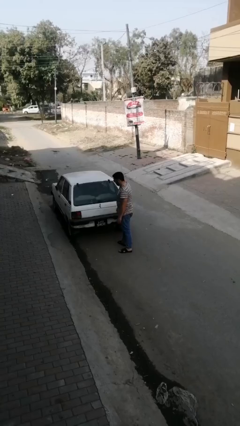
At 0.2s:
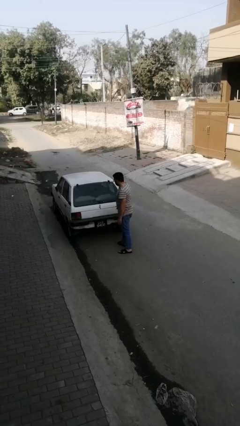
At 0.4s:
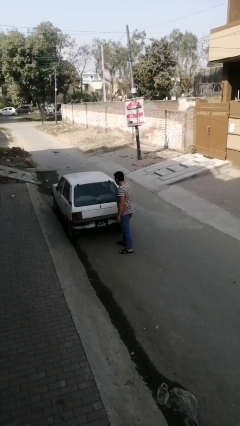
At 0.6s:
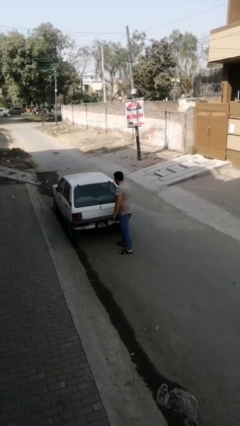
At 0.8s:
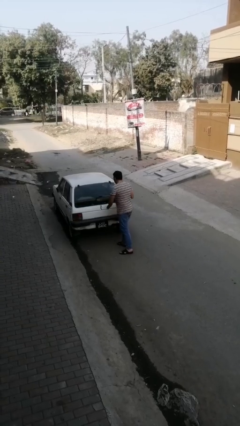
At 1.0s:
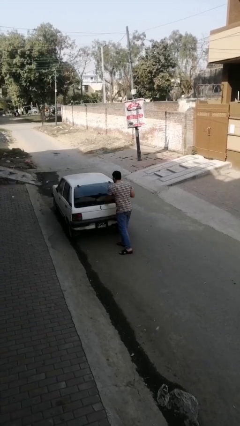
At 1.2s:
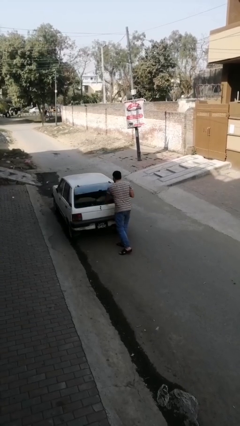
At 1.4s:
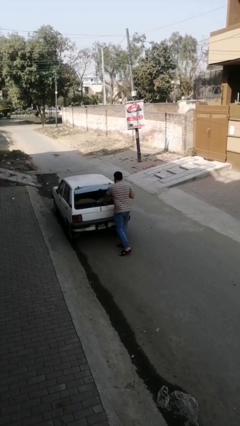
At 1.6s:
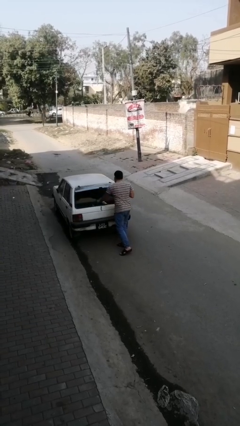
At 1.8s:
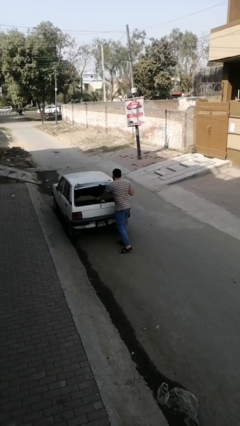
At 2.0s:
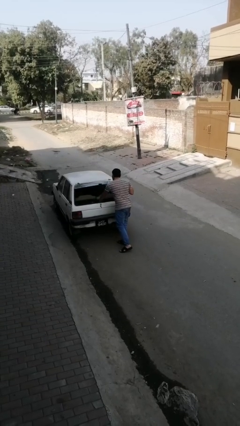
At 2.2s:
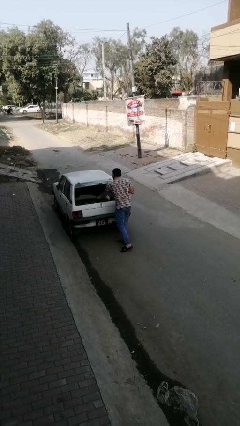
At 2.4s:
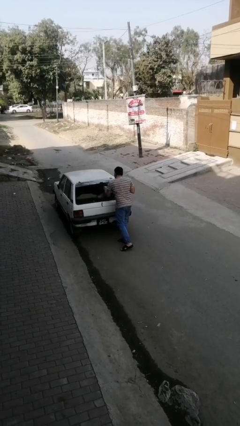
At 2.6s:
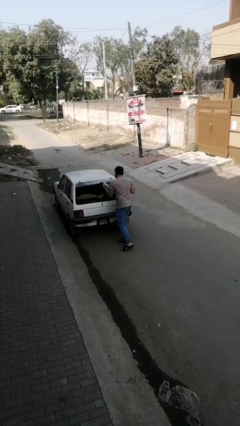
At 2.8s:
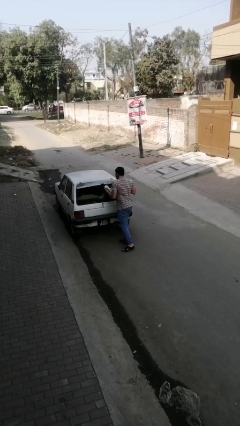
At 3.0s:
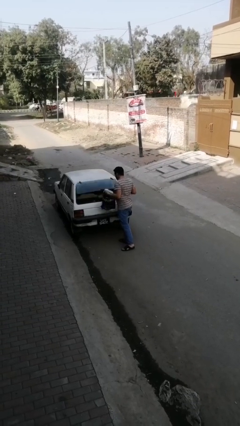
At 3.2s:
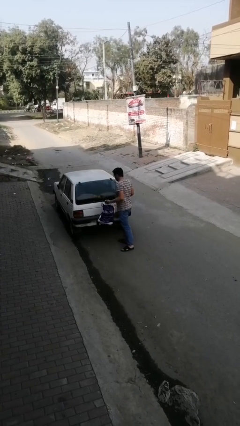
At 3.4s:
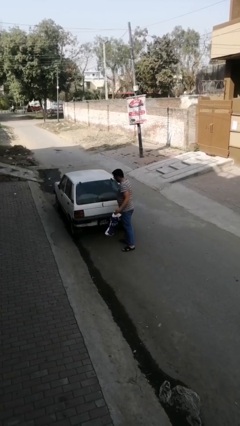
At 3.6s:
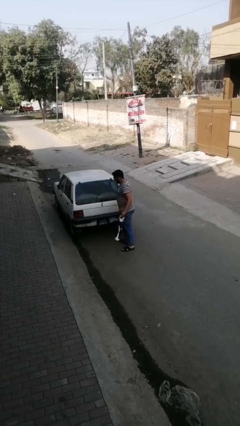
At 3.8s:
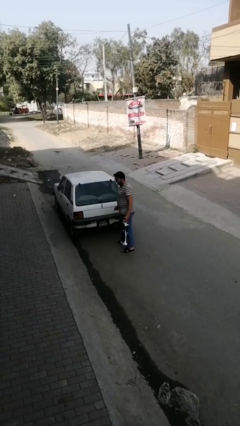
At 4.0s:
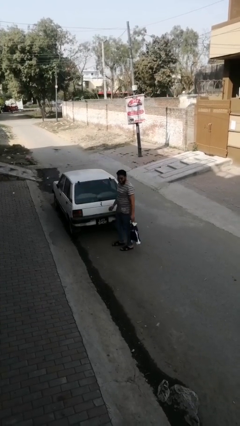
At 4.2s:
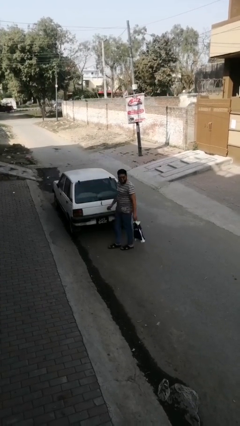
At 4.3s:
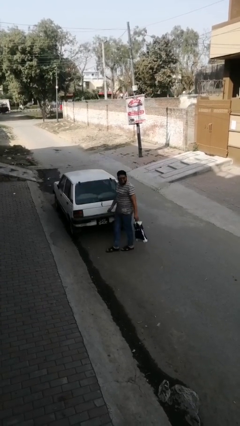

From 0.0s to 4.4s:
person unloads car

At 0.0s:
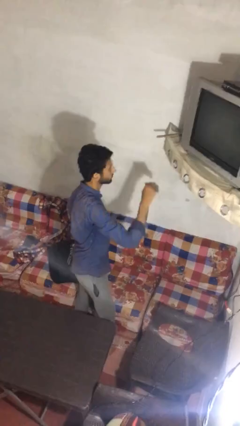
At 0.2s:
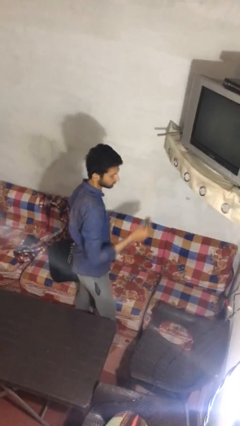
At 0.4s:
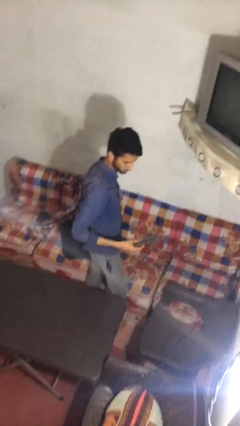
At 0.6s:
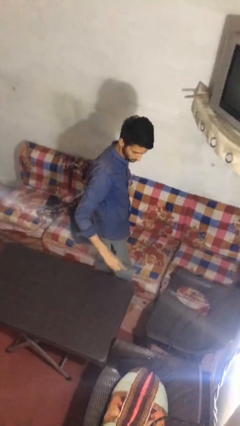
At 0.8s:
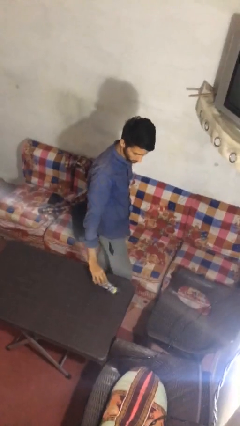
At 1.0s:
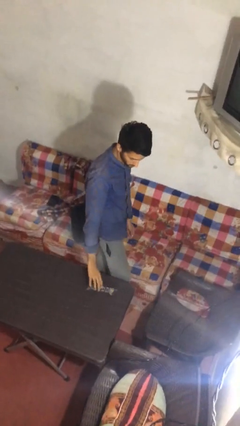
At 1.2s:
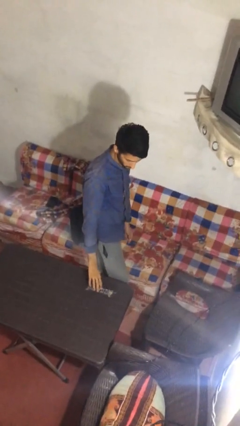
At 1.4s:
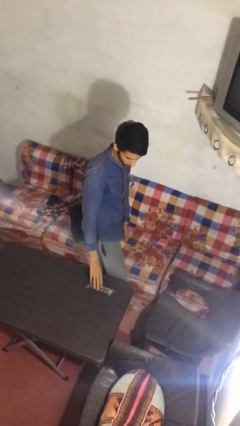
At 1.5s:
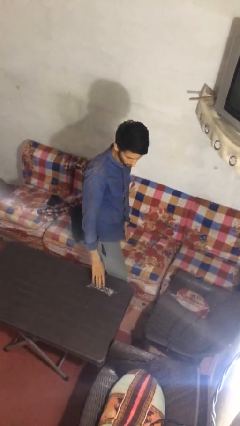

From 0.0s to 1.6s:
person puts down object on table

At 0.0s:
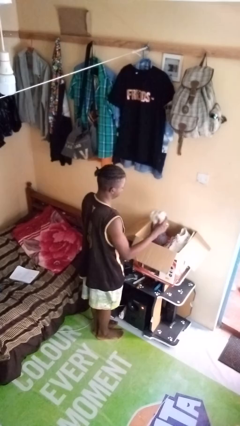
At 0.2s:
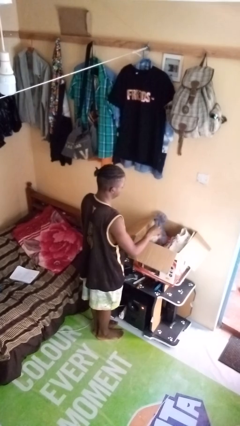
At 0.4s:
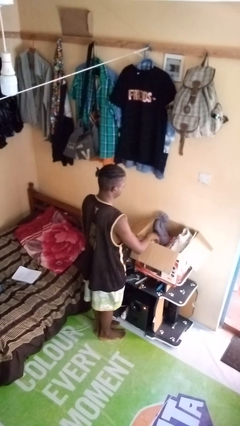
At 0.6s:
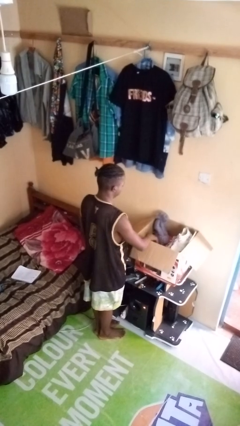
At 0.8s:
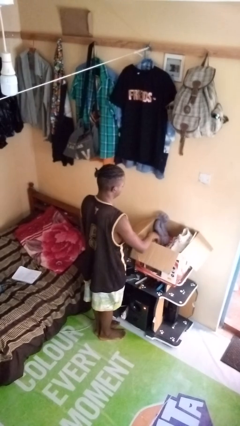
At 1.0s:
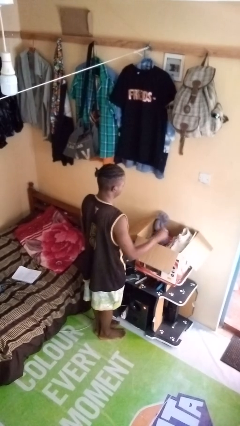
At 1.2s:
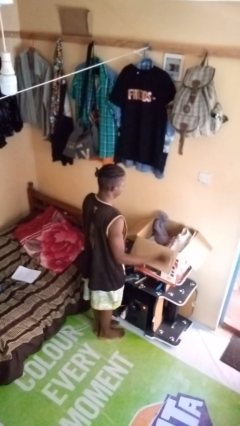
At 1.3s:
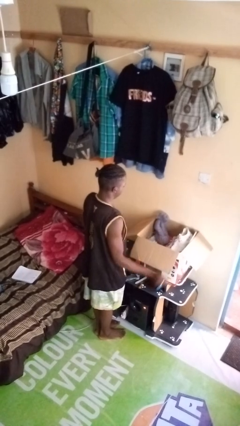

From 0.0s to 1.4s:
person puts object into box

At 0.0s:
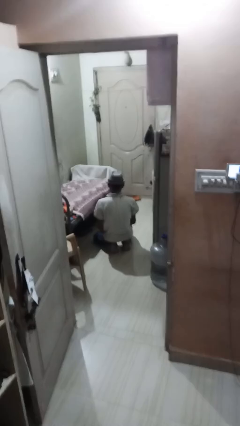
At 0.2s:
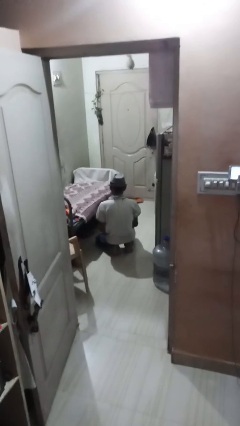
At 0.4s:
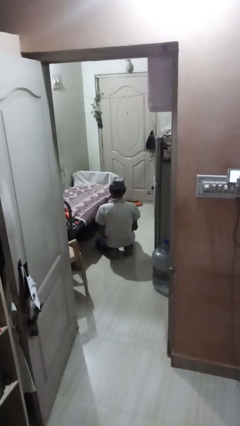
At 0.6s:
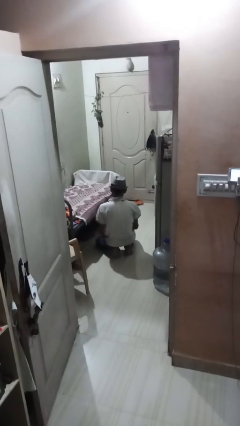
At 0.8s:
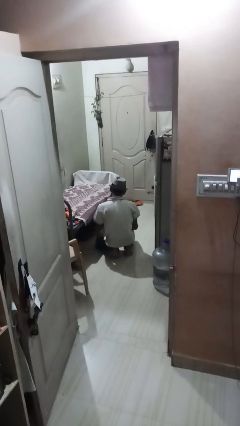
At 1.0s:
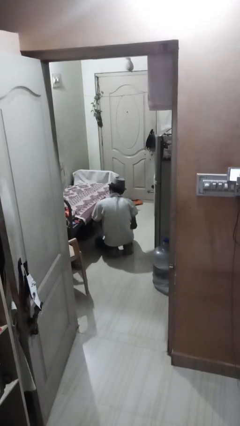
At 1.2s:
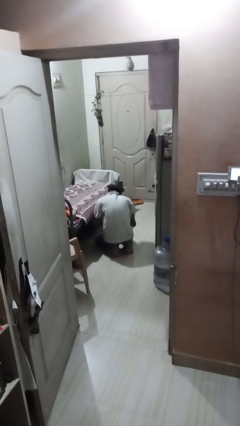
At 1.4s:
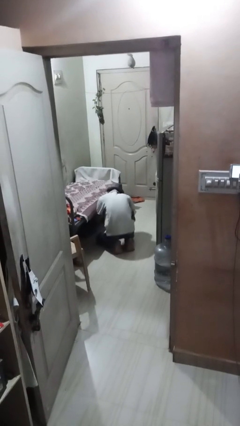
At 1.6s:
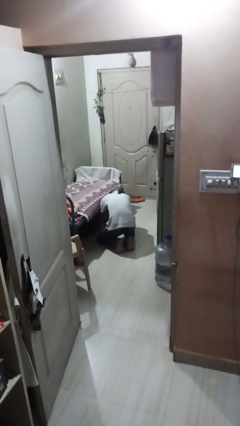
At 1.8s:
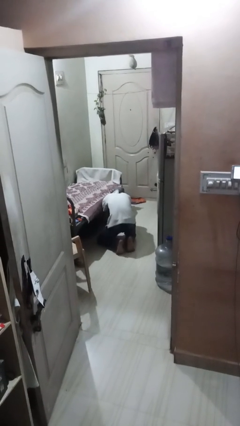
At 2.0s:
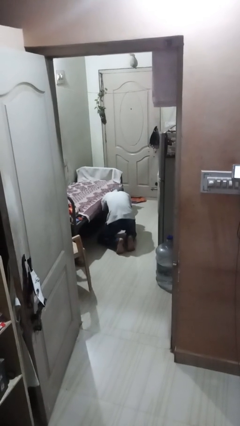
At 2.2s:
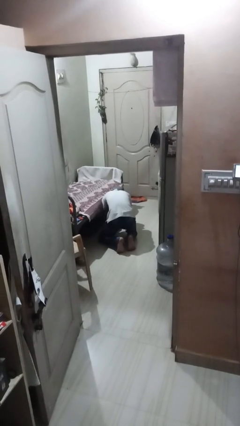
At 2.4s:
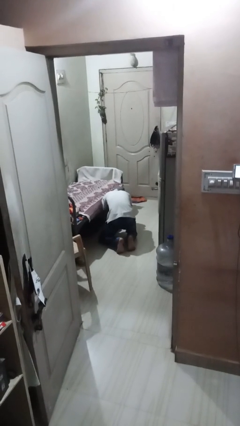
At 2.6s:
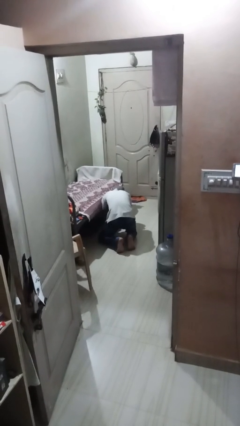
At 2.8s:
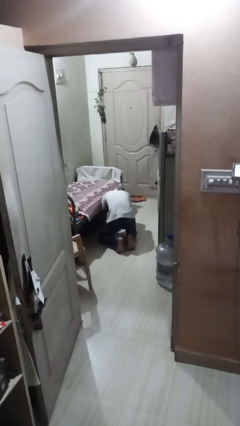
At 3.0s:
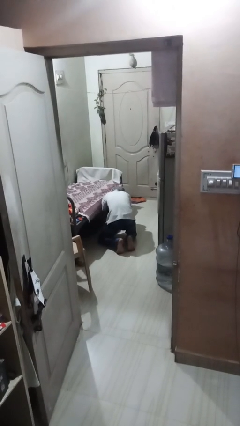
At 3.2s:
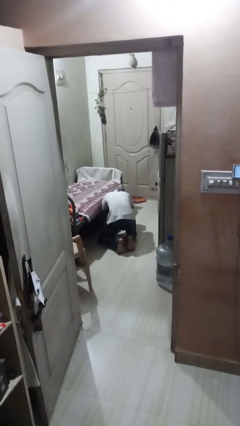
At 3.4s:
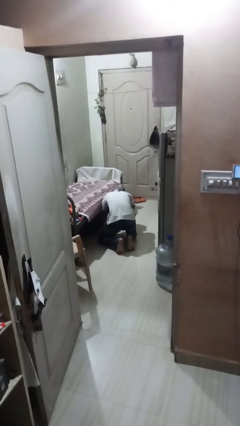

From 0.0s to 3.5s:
person searches under bed

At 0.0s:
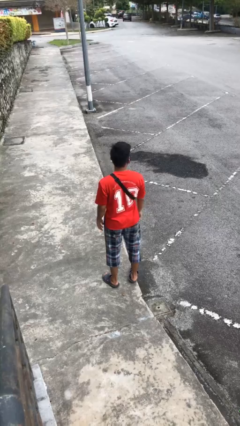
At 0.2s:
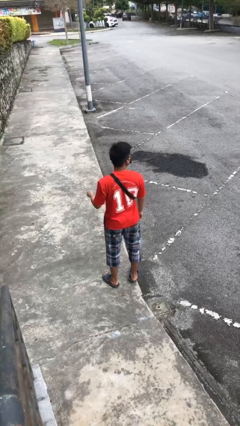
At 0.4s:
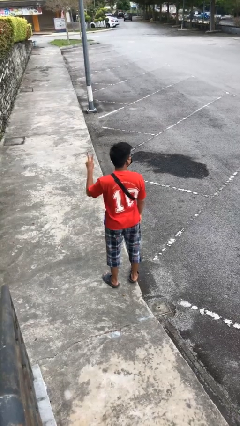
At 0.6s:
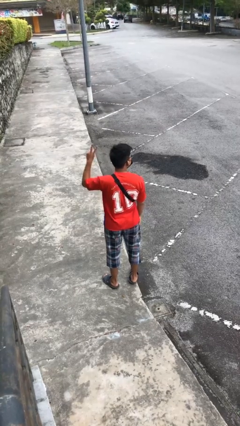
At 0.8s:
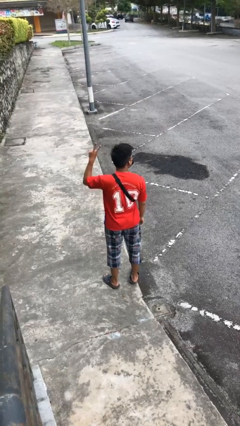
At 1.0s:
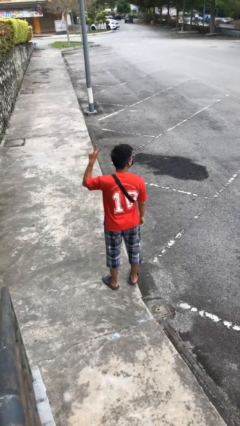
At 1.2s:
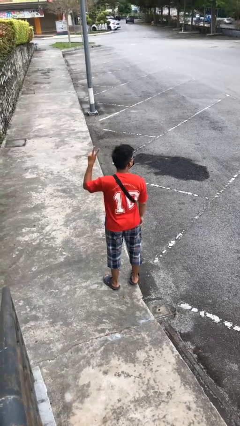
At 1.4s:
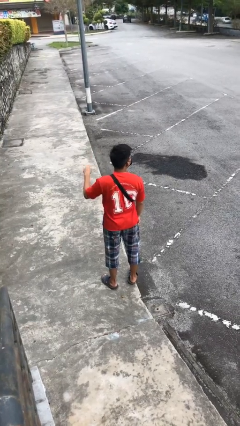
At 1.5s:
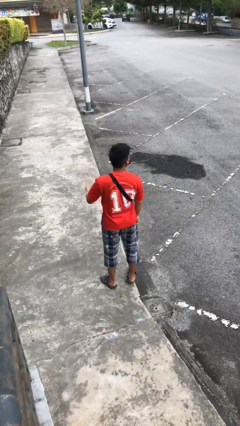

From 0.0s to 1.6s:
person gestures peace

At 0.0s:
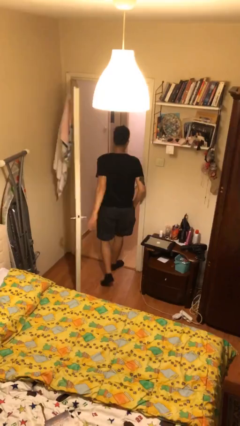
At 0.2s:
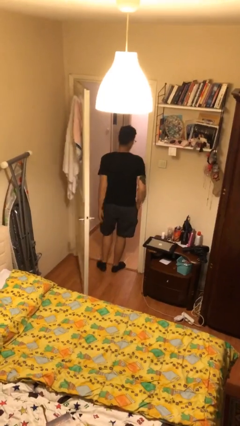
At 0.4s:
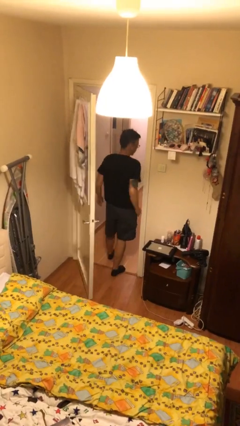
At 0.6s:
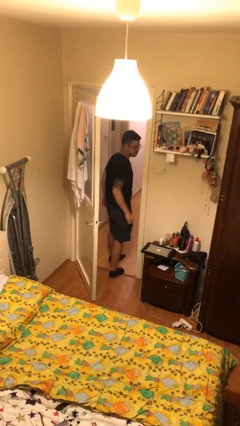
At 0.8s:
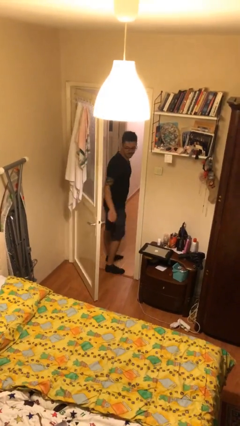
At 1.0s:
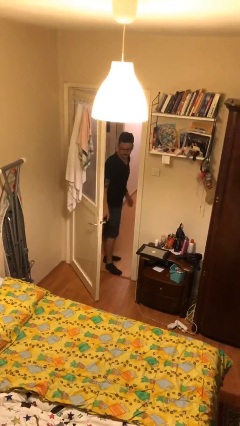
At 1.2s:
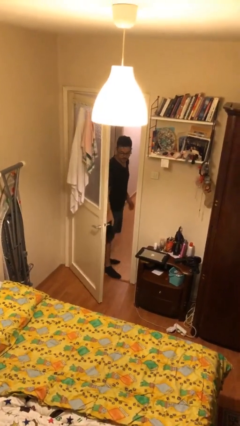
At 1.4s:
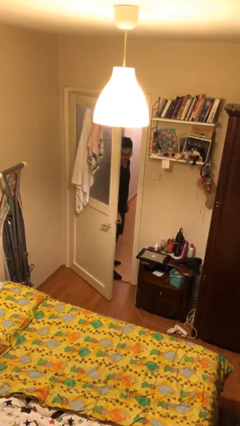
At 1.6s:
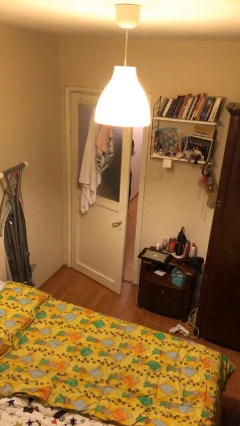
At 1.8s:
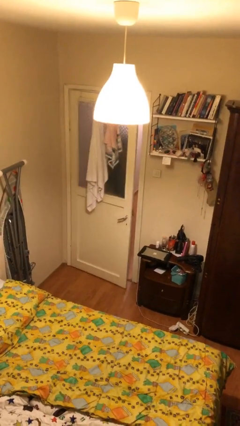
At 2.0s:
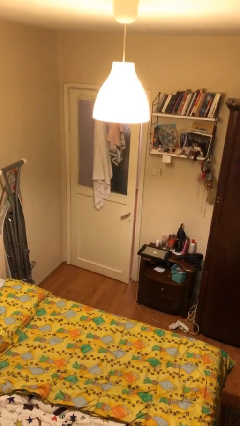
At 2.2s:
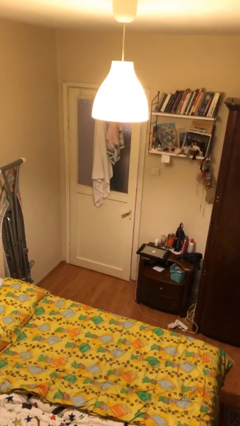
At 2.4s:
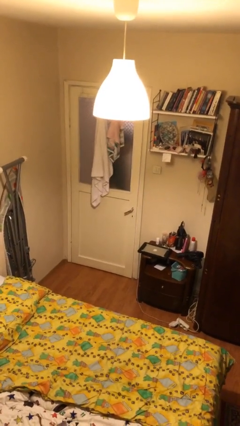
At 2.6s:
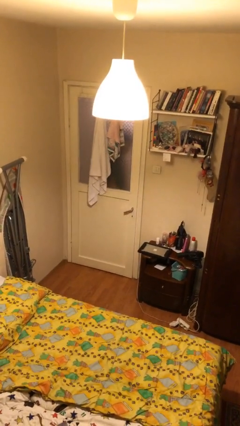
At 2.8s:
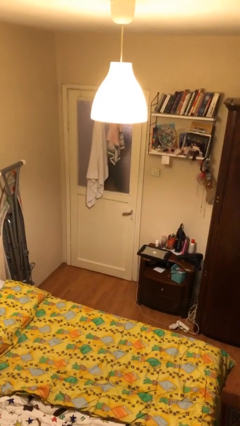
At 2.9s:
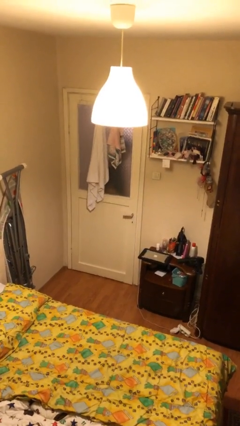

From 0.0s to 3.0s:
person closes facility door

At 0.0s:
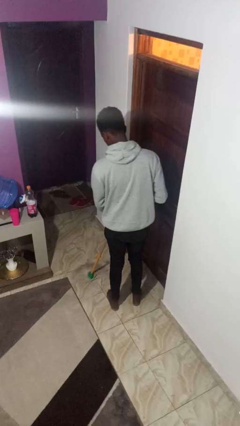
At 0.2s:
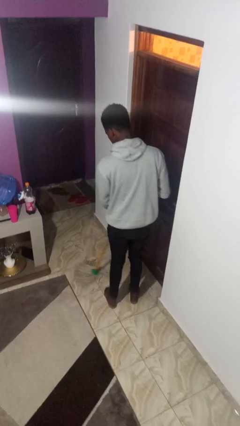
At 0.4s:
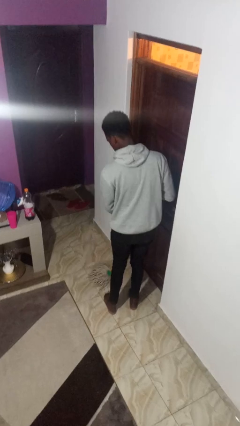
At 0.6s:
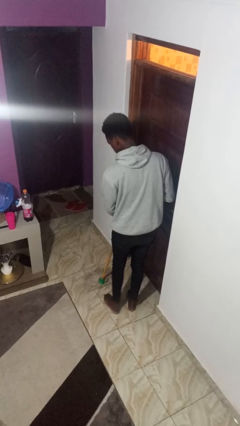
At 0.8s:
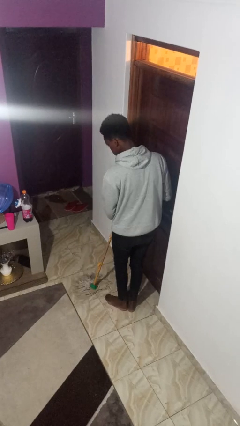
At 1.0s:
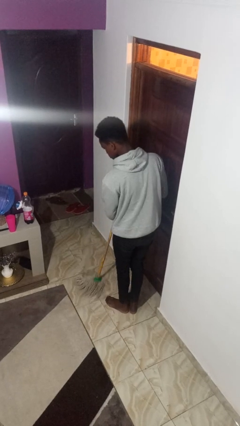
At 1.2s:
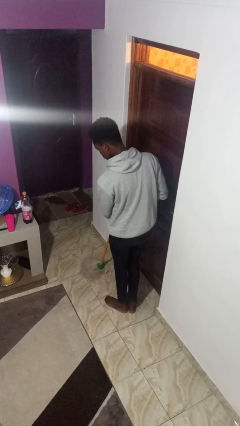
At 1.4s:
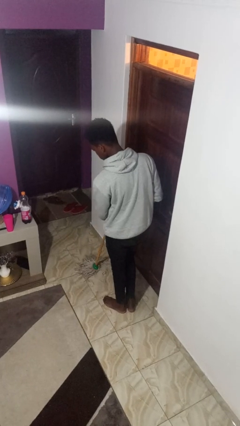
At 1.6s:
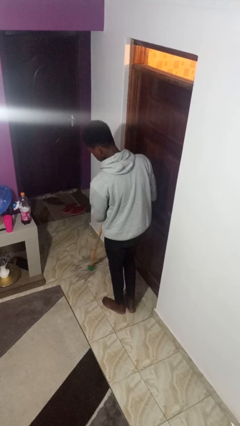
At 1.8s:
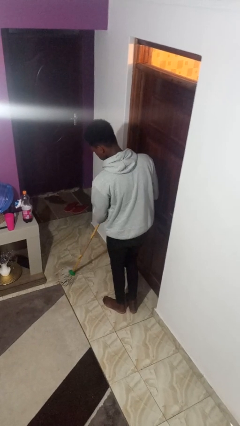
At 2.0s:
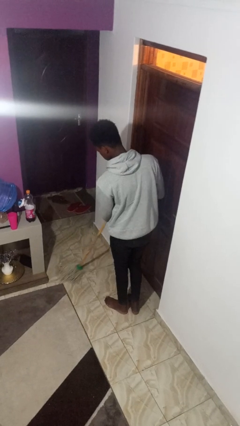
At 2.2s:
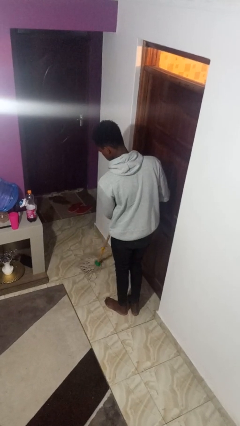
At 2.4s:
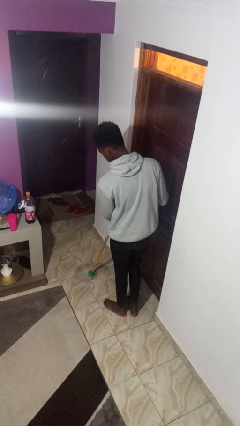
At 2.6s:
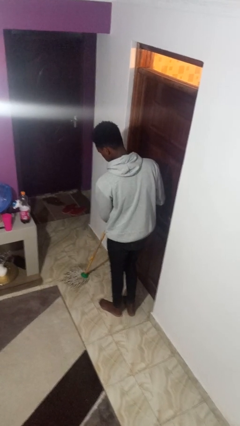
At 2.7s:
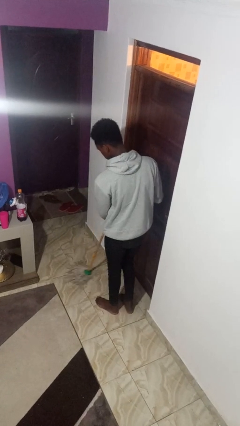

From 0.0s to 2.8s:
person mops
